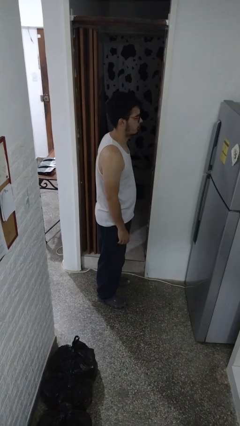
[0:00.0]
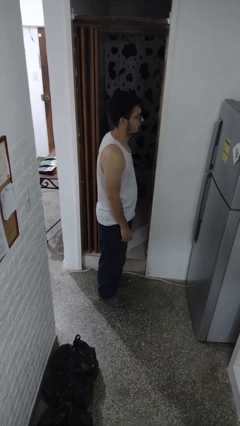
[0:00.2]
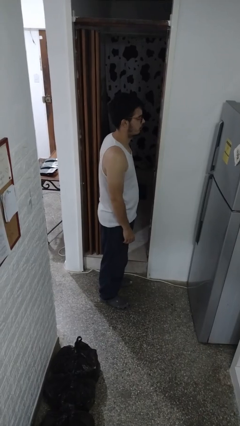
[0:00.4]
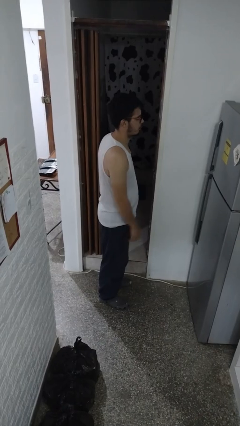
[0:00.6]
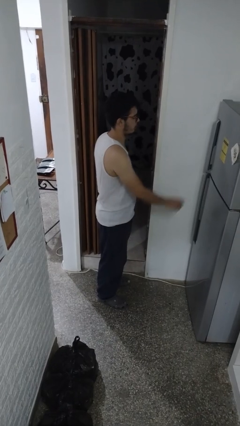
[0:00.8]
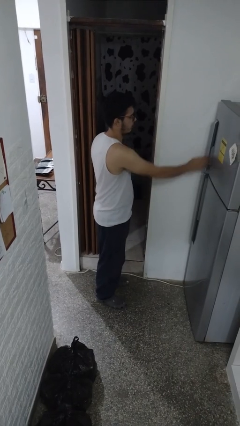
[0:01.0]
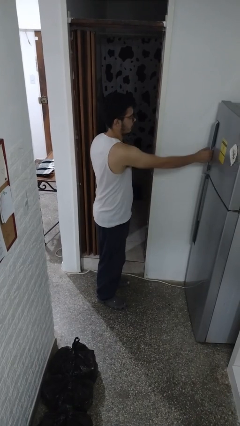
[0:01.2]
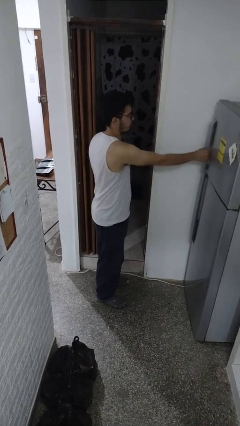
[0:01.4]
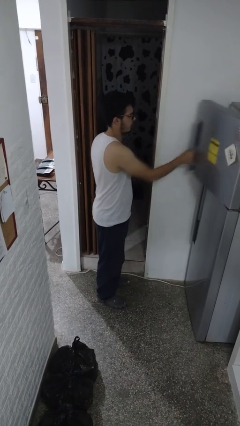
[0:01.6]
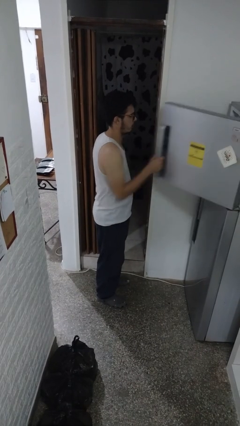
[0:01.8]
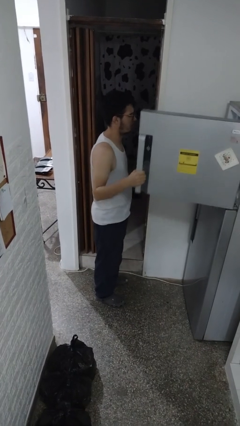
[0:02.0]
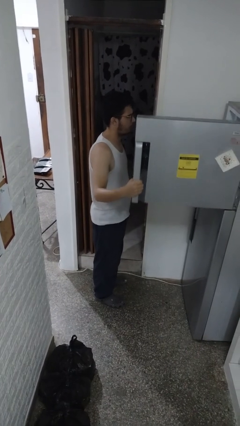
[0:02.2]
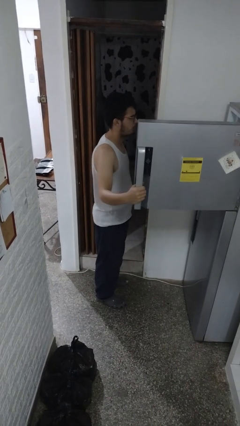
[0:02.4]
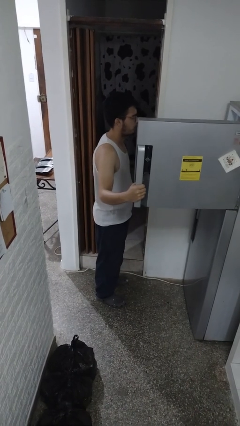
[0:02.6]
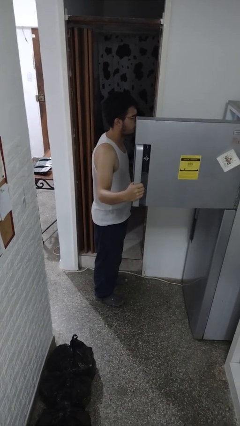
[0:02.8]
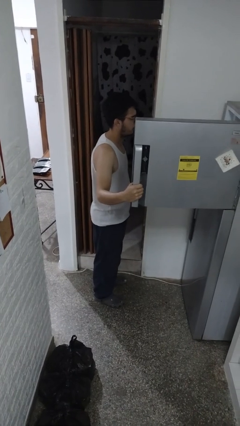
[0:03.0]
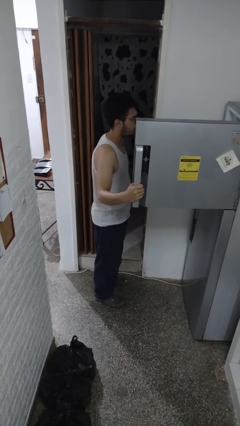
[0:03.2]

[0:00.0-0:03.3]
person opens refrigerator

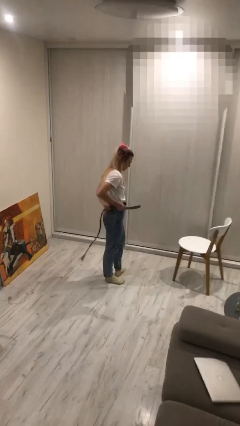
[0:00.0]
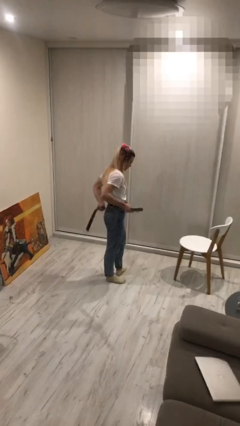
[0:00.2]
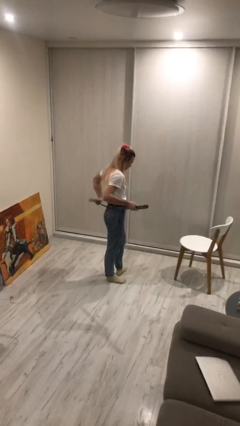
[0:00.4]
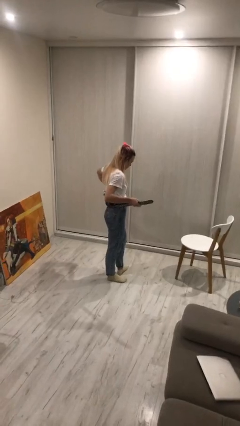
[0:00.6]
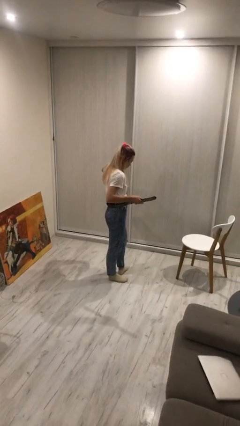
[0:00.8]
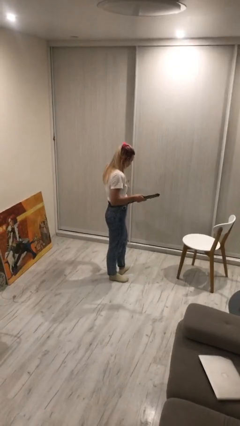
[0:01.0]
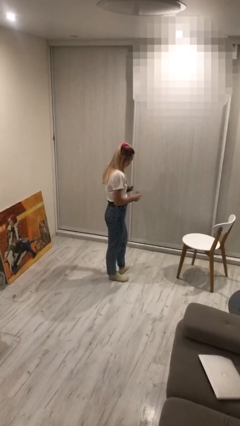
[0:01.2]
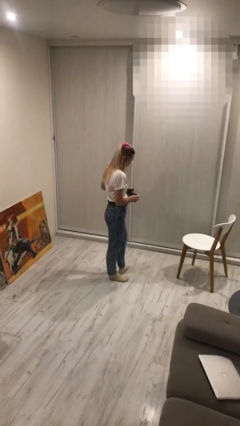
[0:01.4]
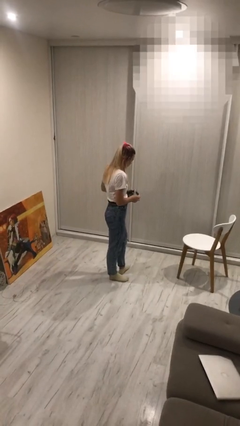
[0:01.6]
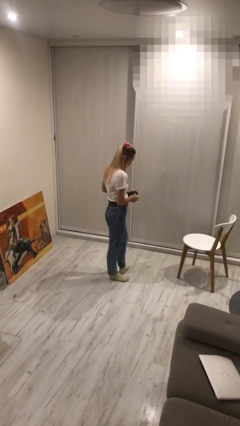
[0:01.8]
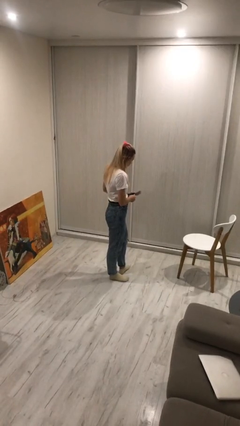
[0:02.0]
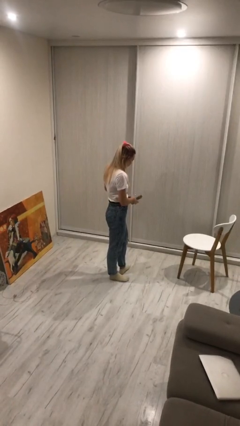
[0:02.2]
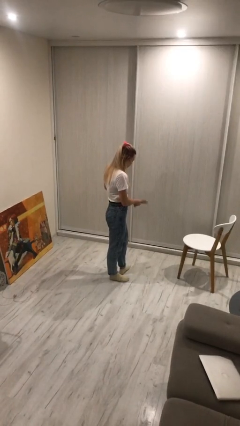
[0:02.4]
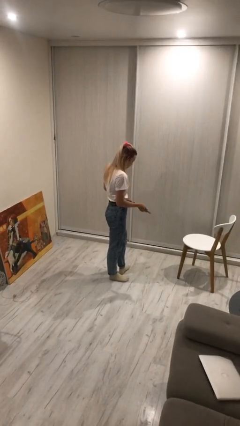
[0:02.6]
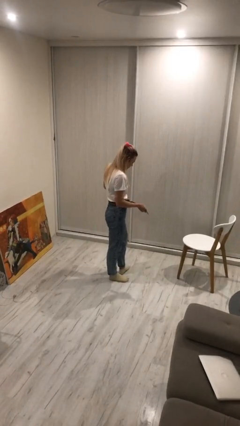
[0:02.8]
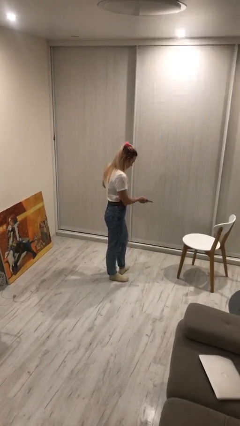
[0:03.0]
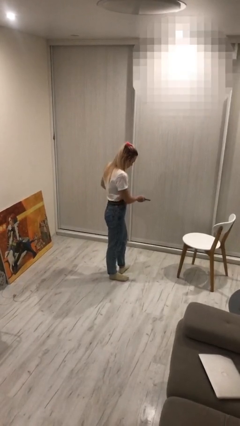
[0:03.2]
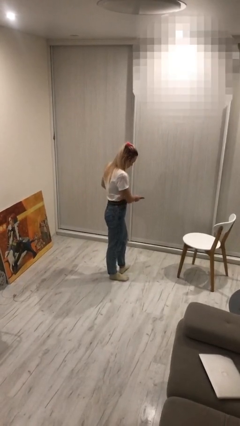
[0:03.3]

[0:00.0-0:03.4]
person puts on belt

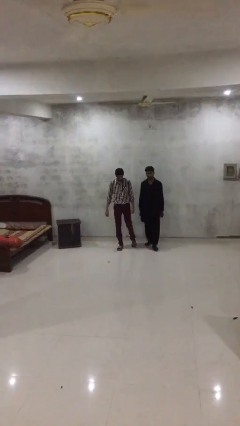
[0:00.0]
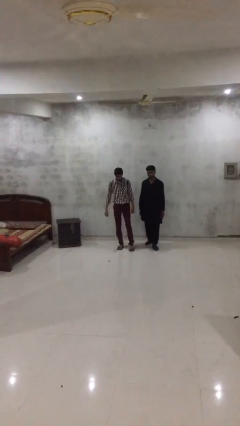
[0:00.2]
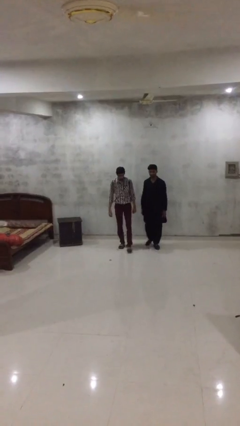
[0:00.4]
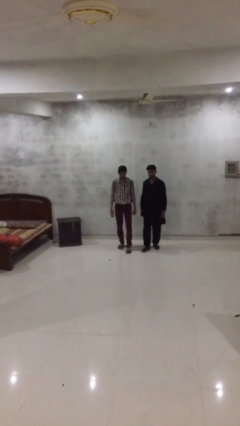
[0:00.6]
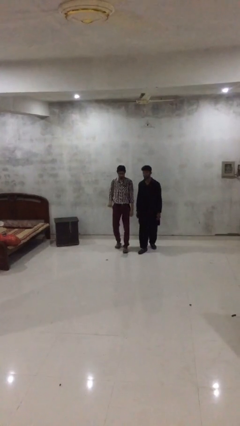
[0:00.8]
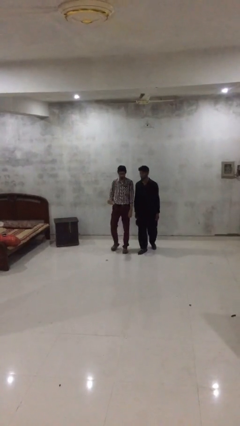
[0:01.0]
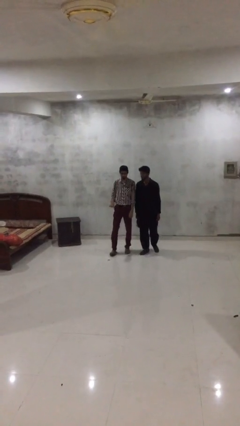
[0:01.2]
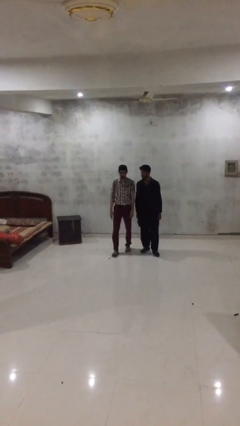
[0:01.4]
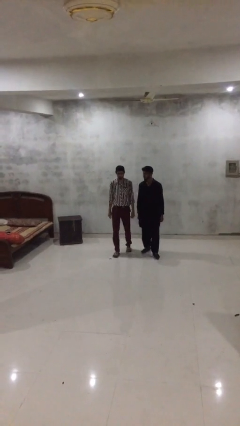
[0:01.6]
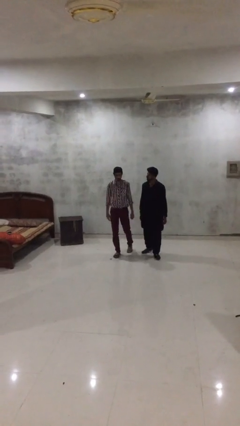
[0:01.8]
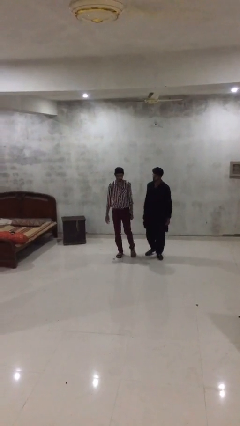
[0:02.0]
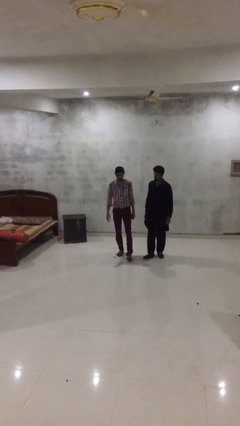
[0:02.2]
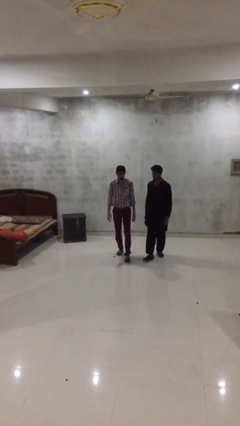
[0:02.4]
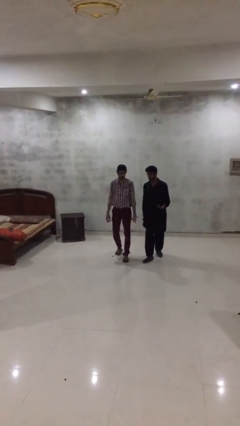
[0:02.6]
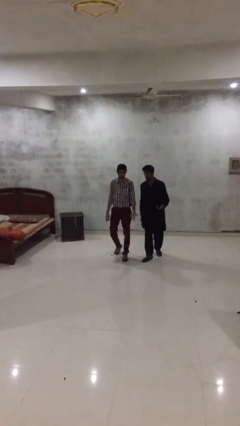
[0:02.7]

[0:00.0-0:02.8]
person talks to person

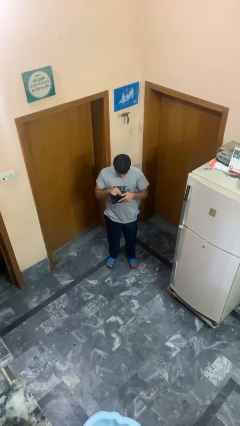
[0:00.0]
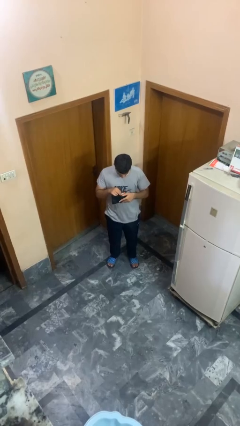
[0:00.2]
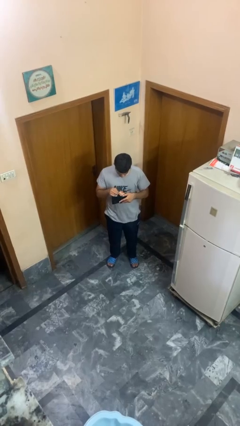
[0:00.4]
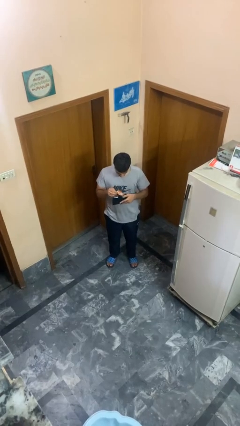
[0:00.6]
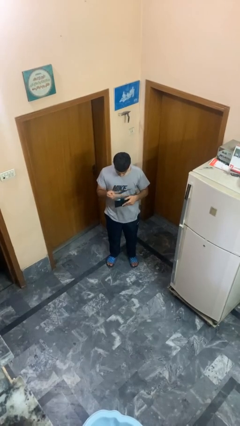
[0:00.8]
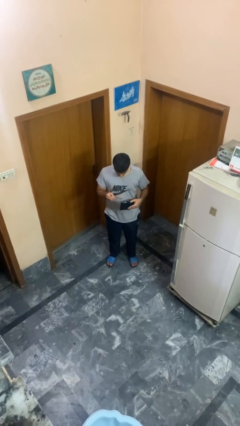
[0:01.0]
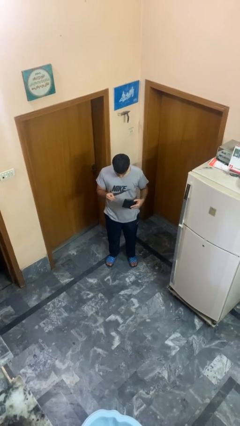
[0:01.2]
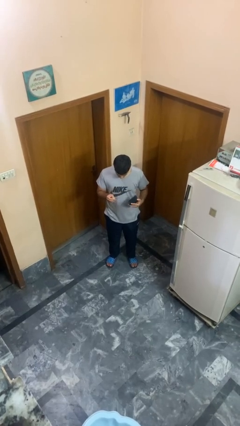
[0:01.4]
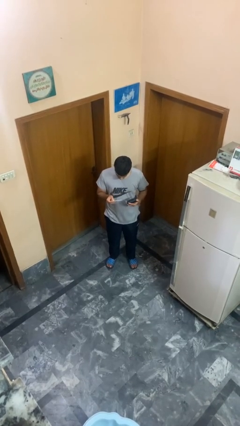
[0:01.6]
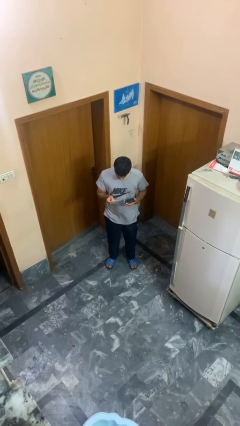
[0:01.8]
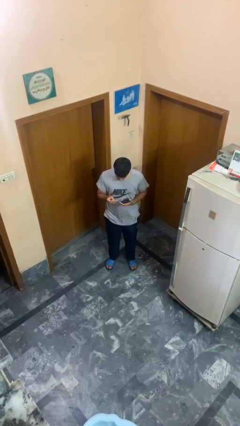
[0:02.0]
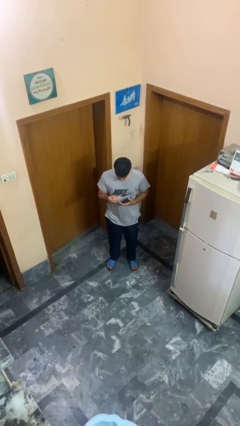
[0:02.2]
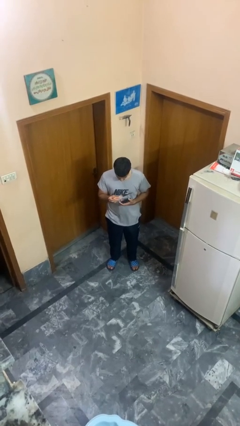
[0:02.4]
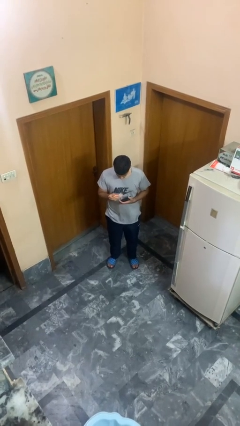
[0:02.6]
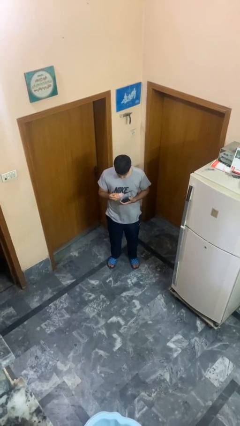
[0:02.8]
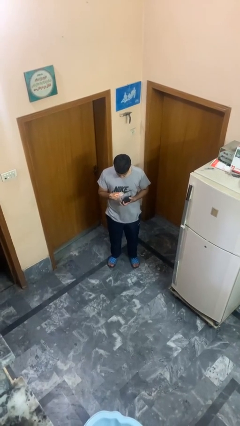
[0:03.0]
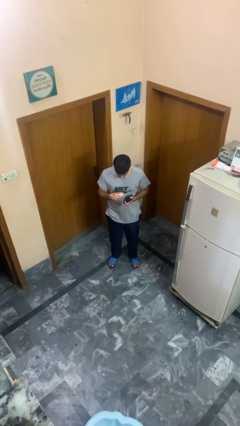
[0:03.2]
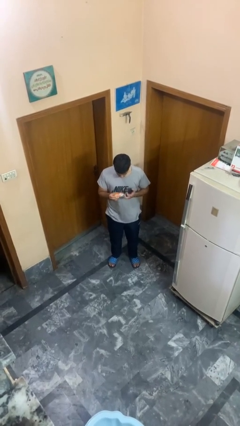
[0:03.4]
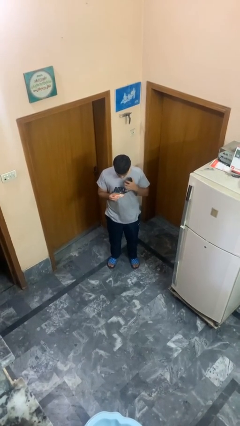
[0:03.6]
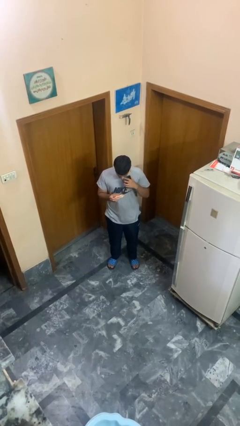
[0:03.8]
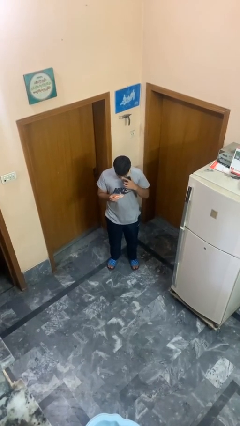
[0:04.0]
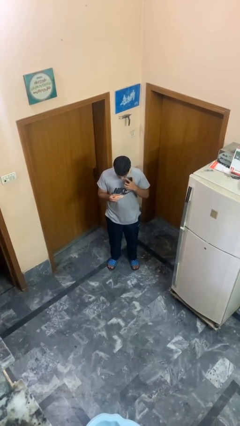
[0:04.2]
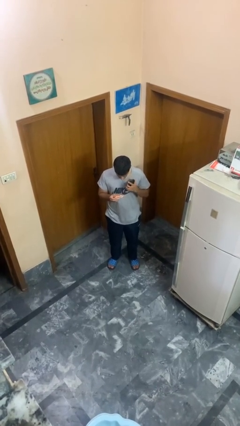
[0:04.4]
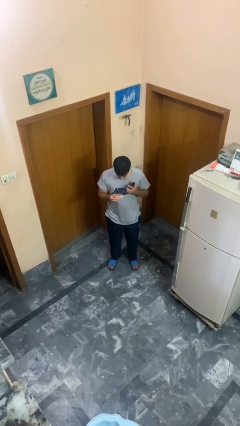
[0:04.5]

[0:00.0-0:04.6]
person takes object from purse

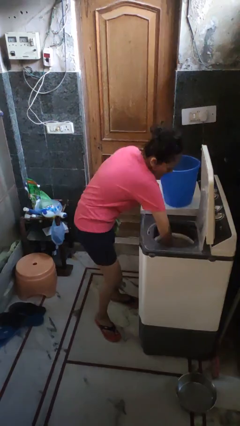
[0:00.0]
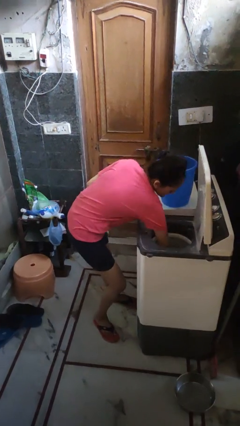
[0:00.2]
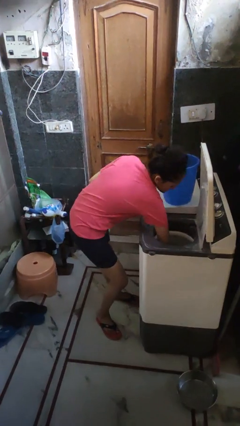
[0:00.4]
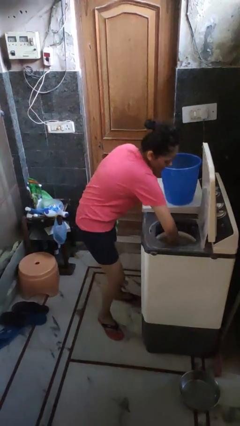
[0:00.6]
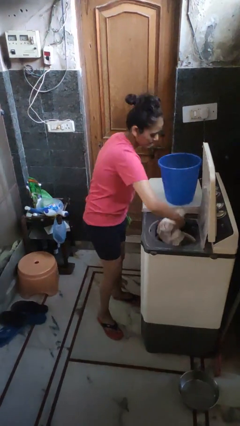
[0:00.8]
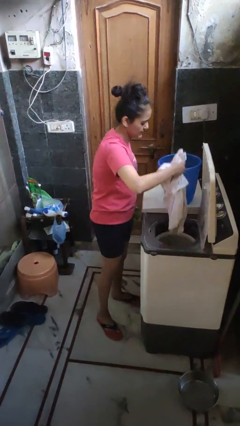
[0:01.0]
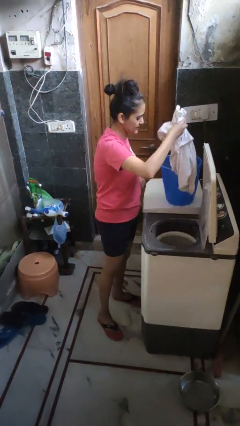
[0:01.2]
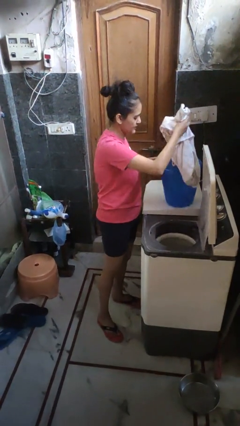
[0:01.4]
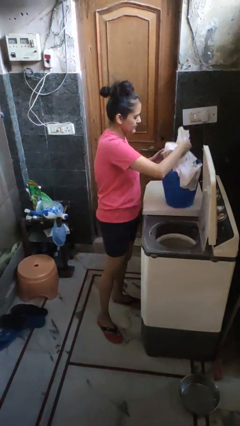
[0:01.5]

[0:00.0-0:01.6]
person takes clothes from dresser

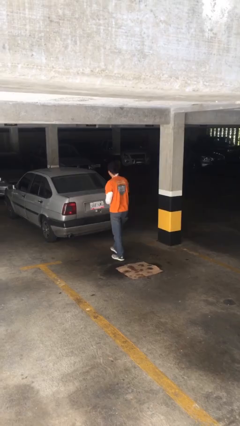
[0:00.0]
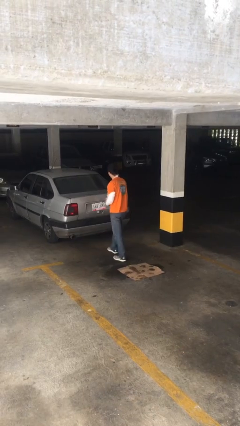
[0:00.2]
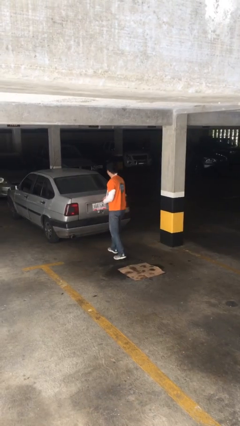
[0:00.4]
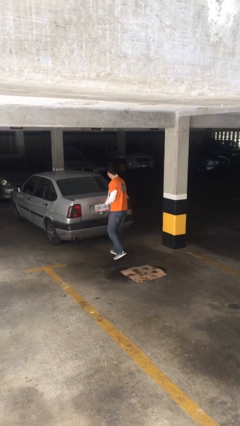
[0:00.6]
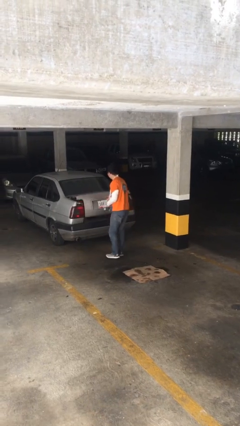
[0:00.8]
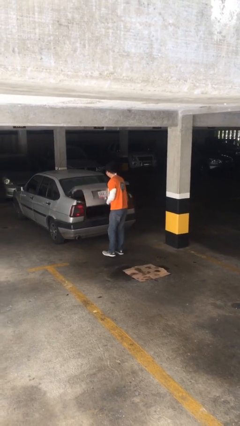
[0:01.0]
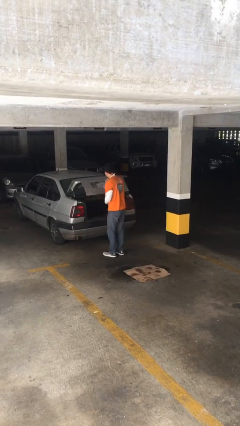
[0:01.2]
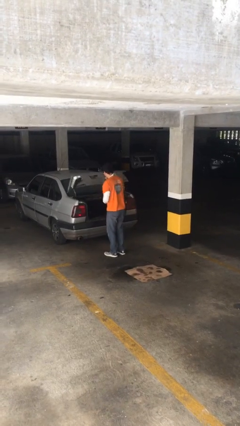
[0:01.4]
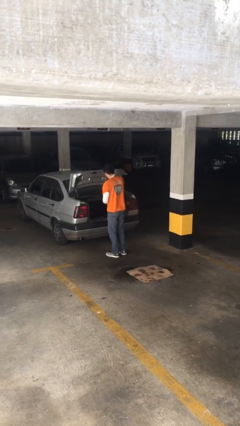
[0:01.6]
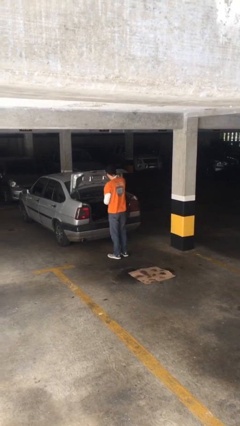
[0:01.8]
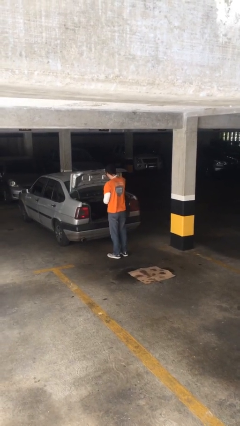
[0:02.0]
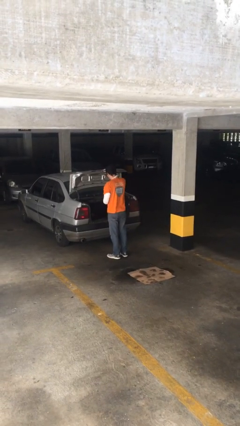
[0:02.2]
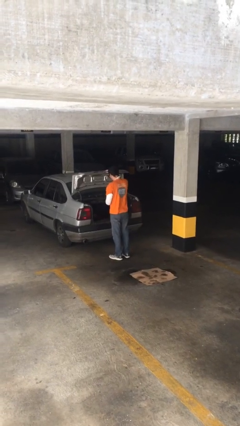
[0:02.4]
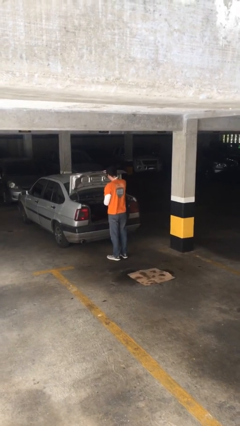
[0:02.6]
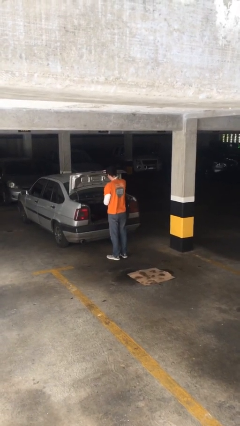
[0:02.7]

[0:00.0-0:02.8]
person opens car trunk
